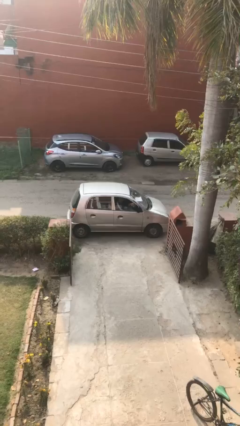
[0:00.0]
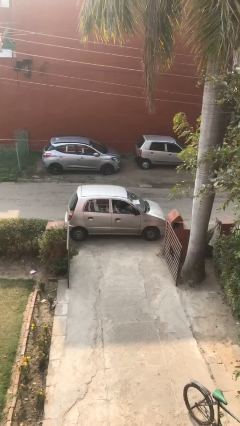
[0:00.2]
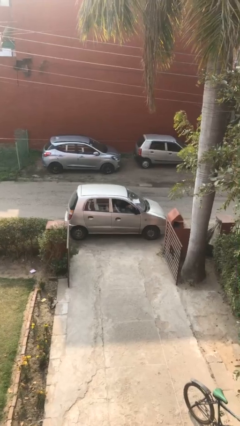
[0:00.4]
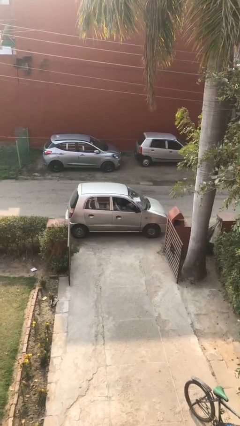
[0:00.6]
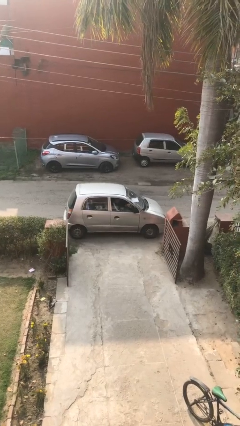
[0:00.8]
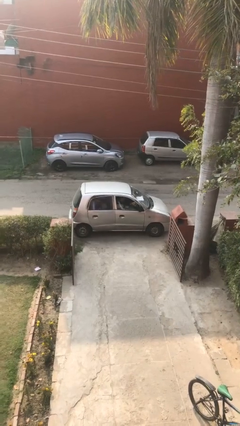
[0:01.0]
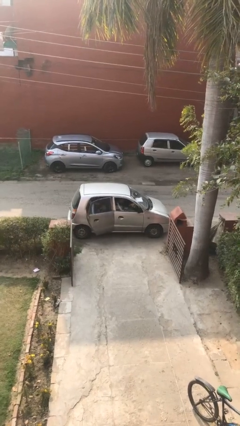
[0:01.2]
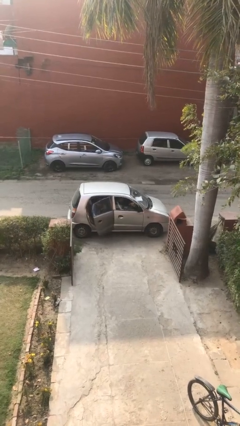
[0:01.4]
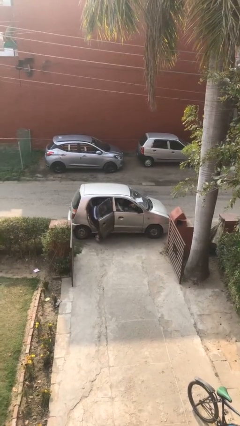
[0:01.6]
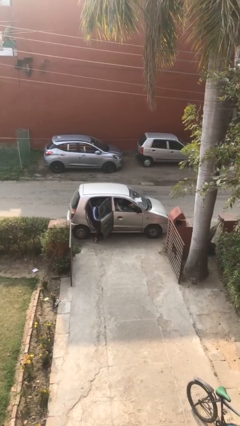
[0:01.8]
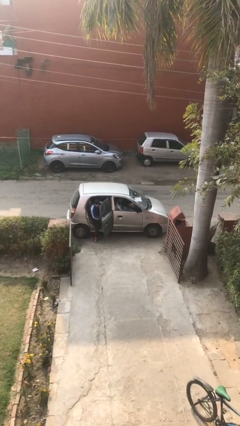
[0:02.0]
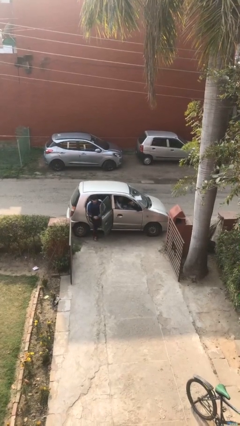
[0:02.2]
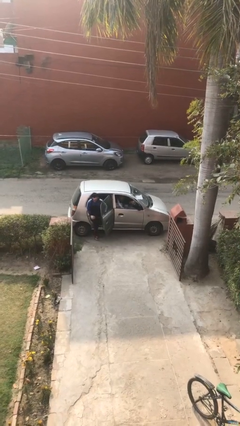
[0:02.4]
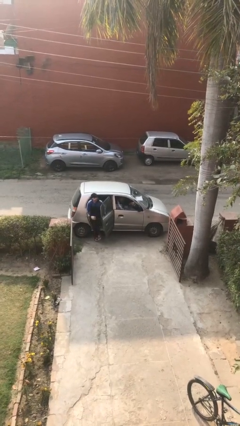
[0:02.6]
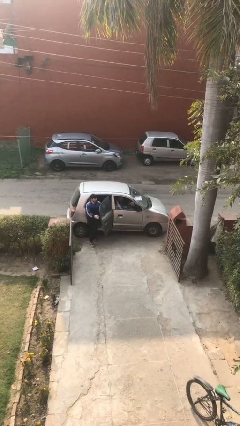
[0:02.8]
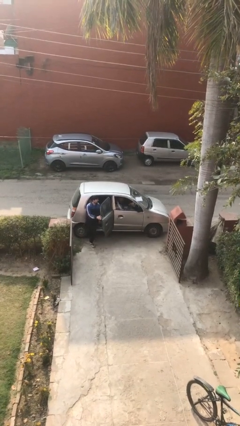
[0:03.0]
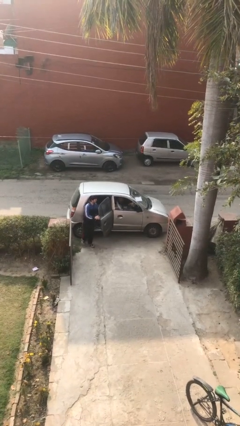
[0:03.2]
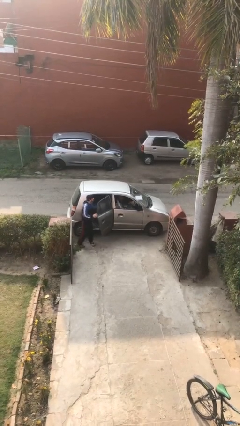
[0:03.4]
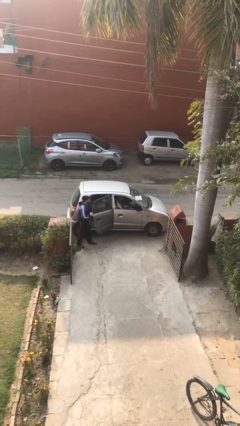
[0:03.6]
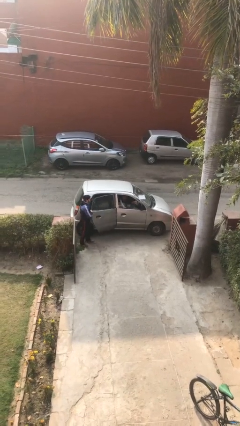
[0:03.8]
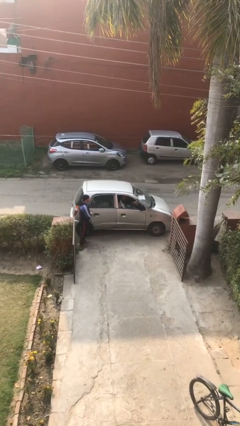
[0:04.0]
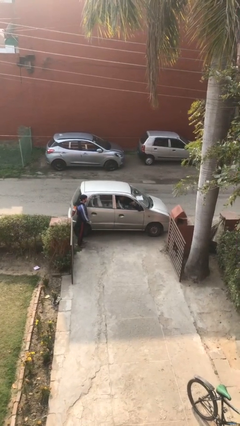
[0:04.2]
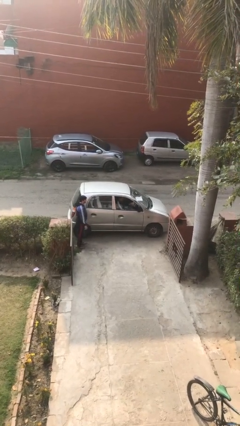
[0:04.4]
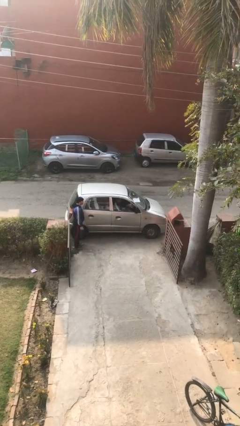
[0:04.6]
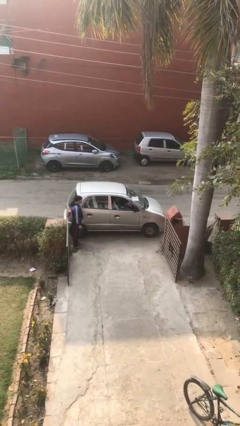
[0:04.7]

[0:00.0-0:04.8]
car drops off person

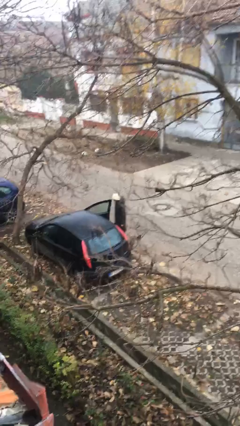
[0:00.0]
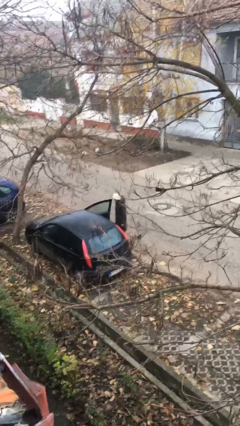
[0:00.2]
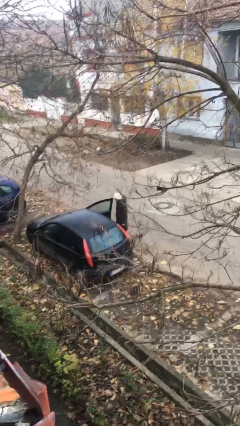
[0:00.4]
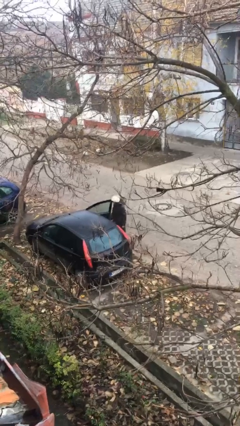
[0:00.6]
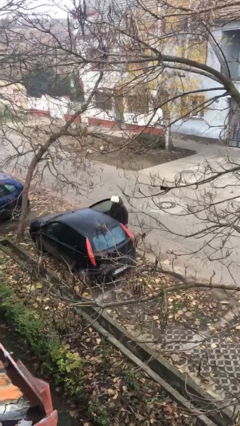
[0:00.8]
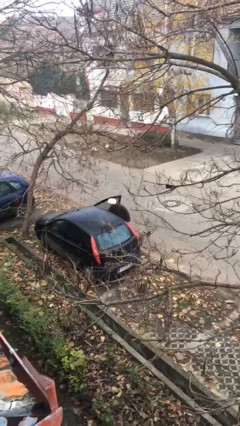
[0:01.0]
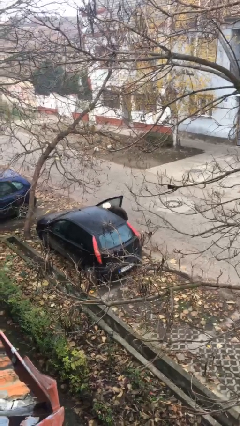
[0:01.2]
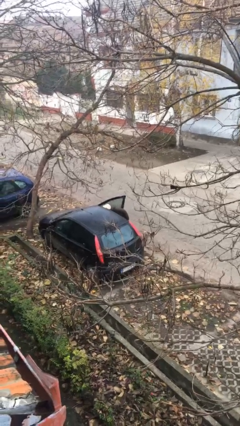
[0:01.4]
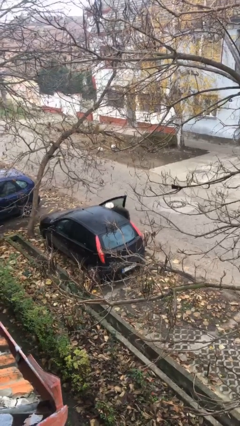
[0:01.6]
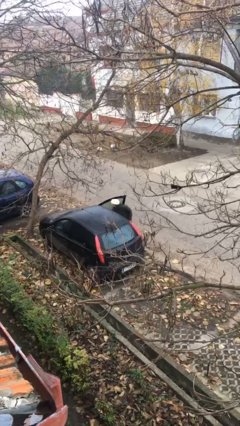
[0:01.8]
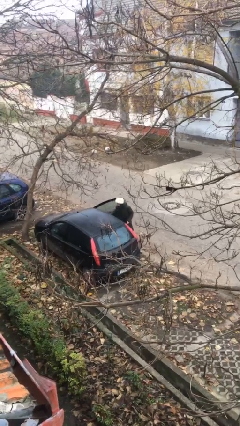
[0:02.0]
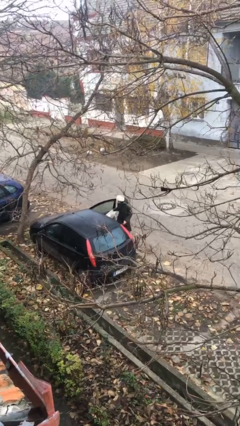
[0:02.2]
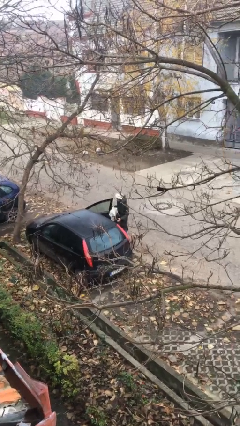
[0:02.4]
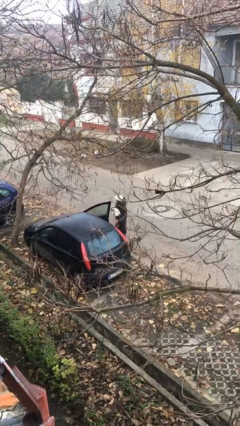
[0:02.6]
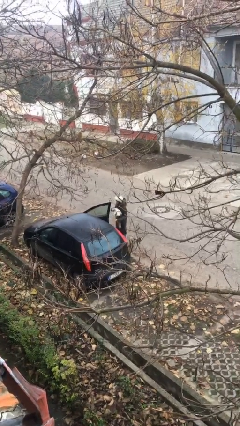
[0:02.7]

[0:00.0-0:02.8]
person unloads car

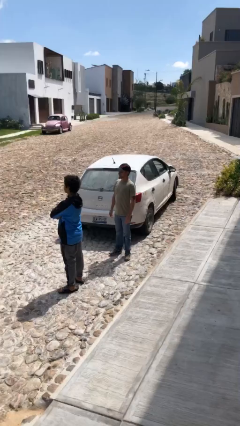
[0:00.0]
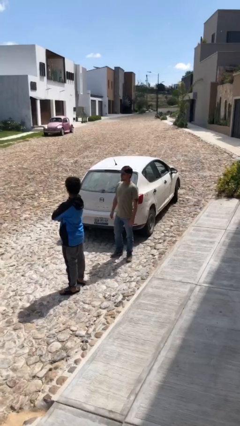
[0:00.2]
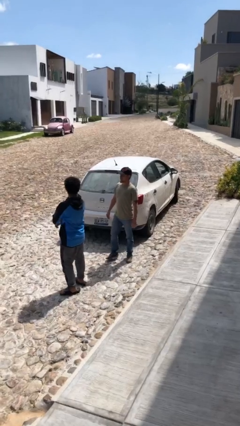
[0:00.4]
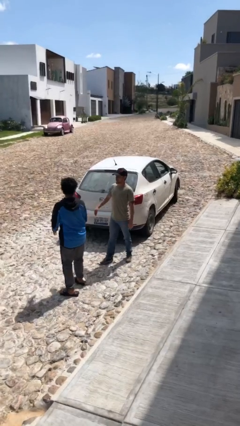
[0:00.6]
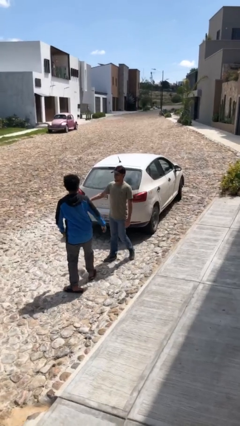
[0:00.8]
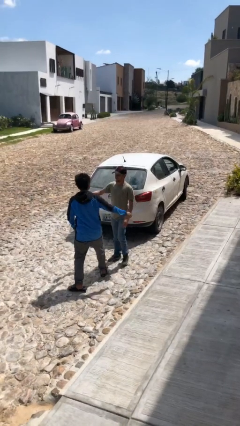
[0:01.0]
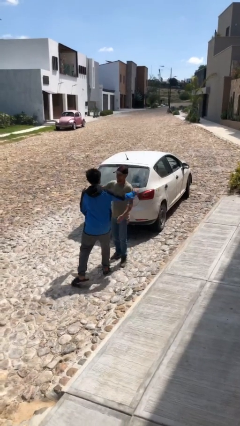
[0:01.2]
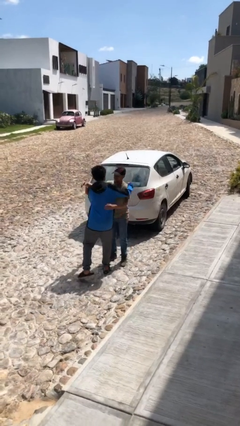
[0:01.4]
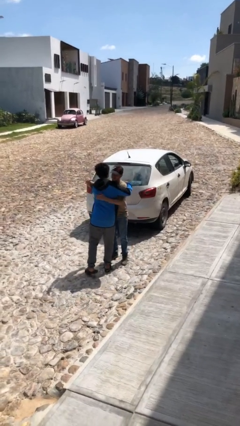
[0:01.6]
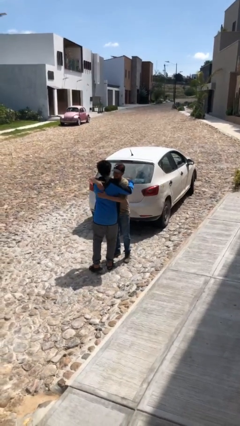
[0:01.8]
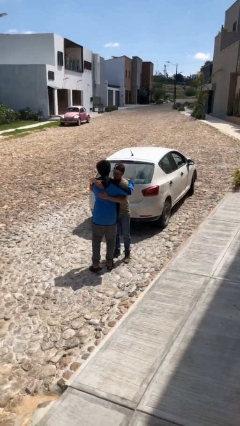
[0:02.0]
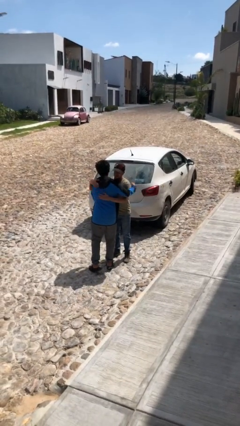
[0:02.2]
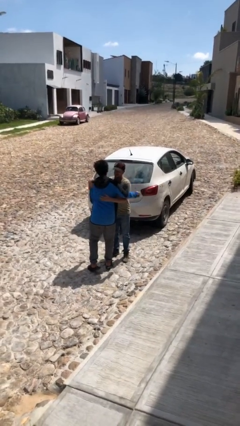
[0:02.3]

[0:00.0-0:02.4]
person embraces person

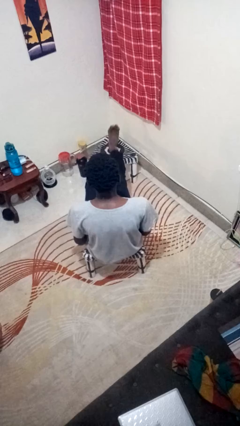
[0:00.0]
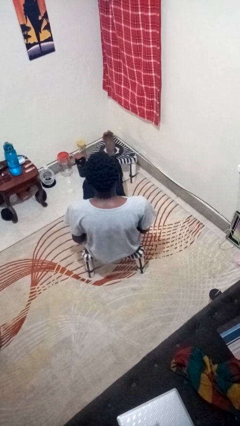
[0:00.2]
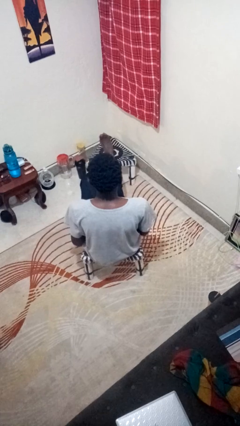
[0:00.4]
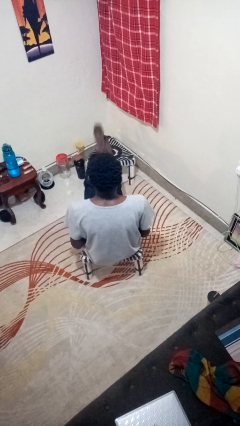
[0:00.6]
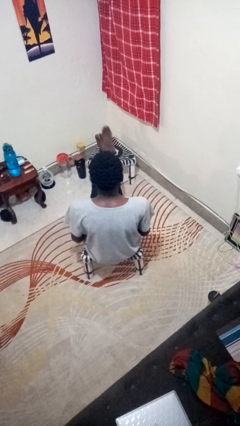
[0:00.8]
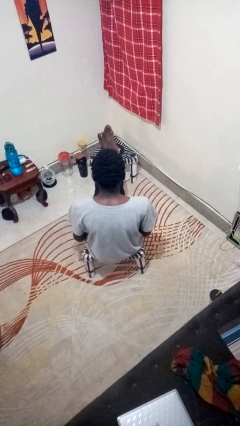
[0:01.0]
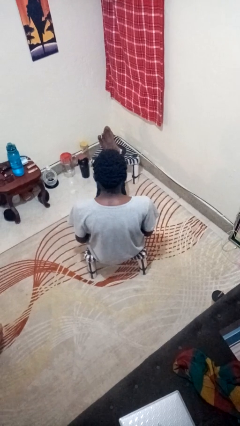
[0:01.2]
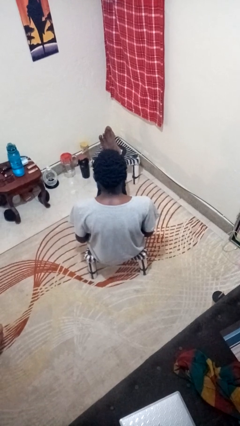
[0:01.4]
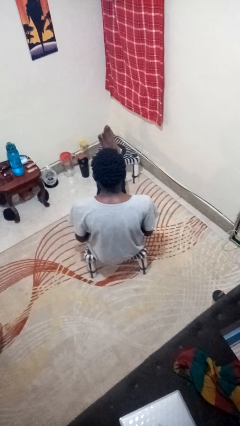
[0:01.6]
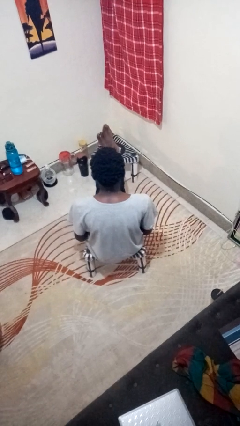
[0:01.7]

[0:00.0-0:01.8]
person puts feet up

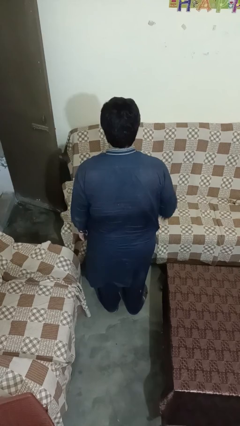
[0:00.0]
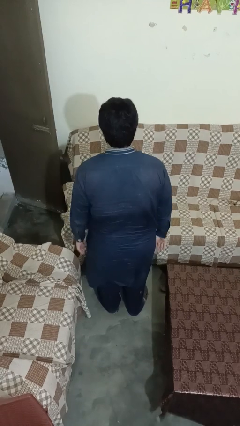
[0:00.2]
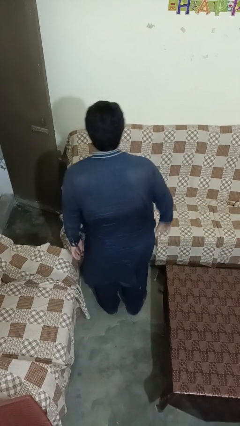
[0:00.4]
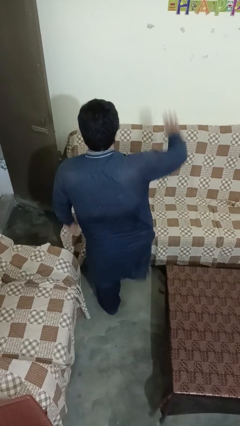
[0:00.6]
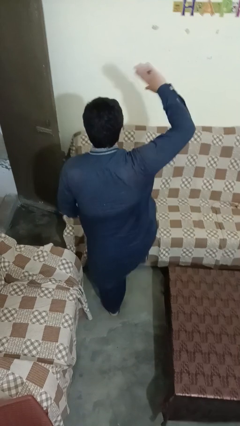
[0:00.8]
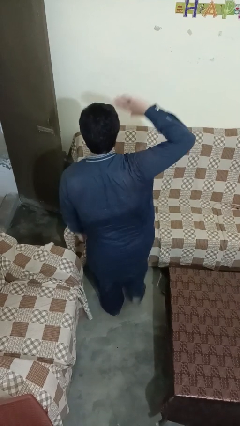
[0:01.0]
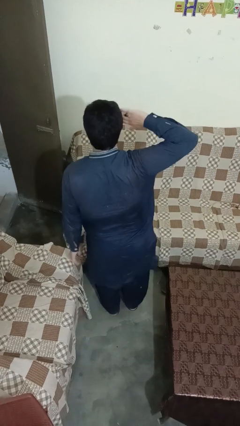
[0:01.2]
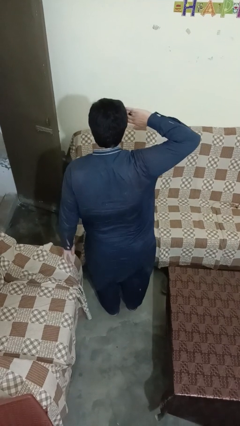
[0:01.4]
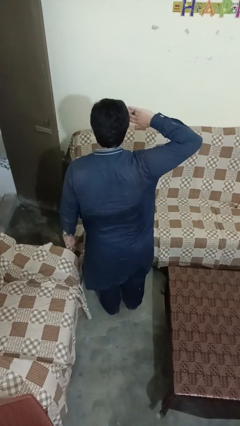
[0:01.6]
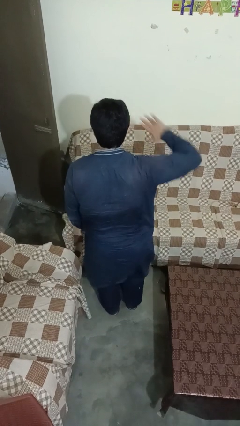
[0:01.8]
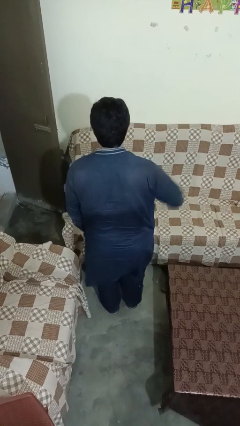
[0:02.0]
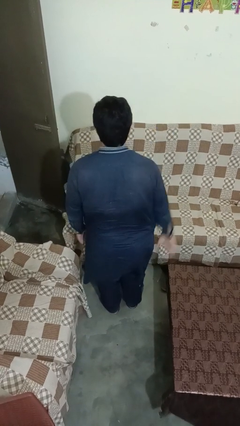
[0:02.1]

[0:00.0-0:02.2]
person salutes

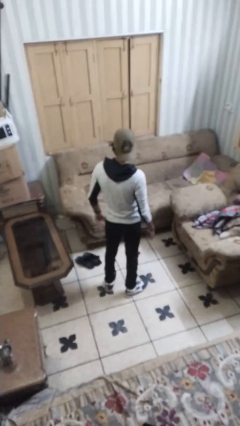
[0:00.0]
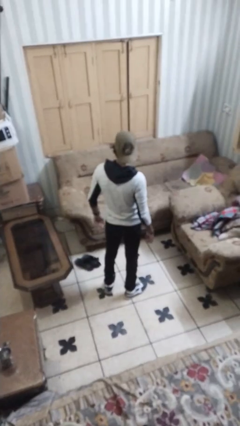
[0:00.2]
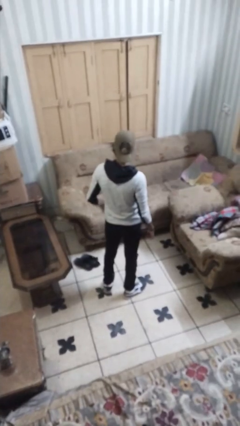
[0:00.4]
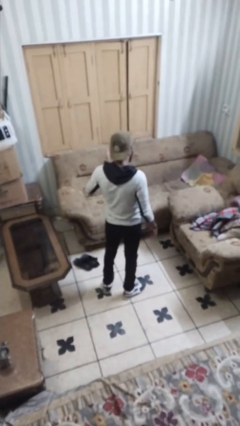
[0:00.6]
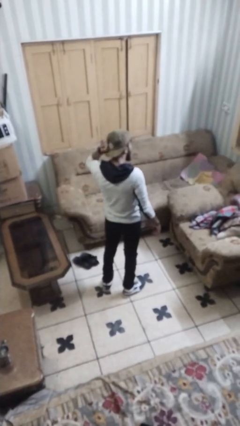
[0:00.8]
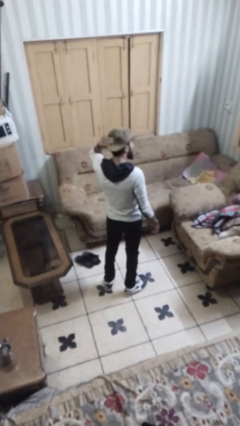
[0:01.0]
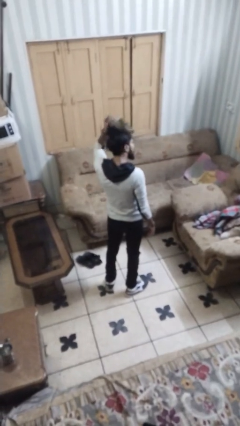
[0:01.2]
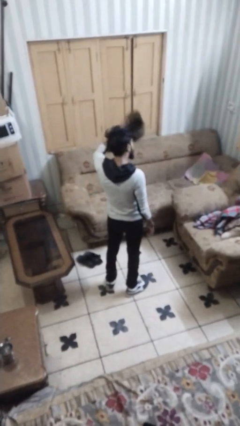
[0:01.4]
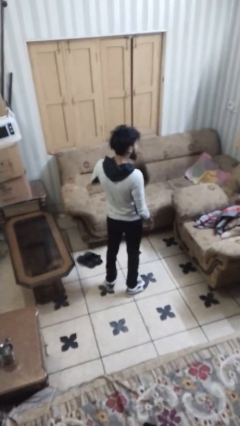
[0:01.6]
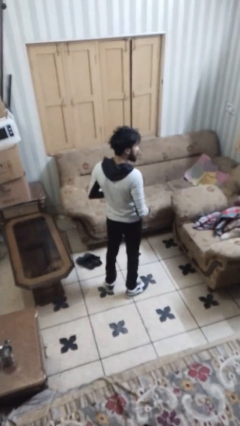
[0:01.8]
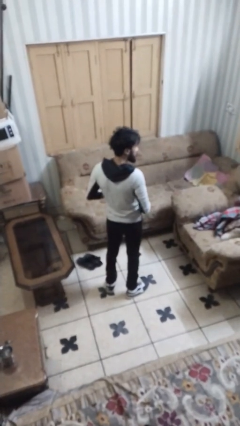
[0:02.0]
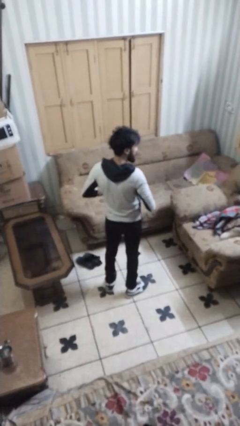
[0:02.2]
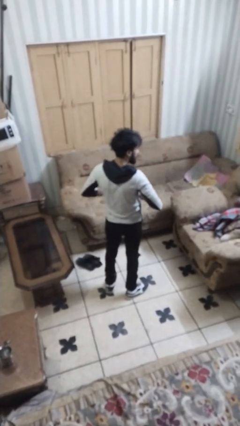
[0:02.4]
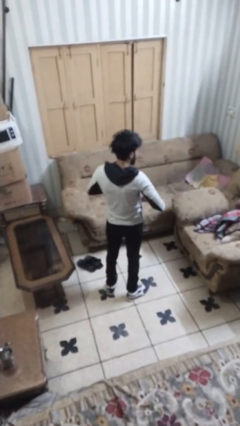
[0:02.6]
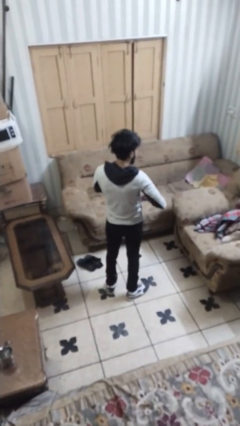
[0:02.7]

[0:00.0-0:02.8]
person takes off hat

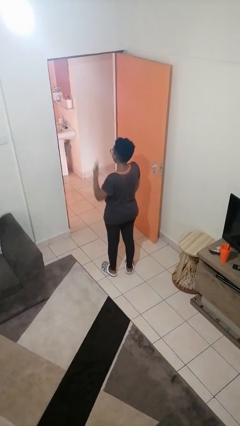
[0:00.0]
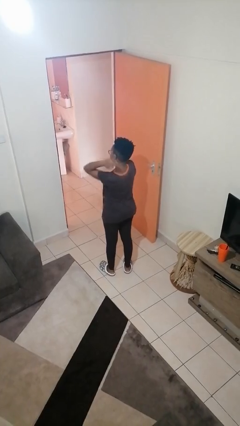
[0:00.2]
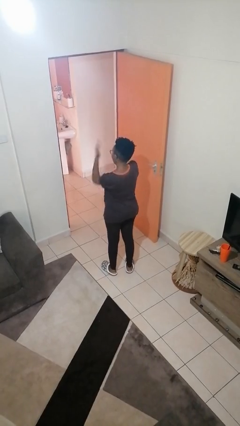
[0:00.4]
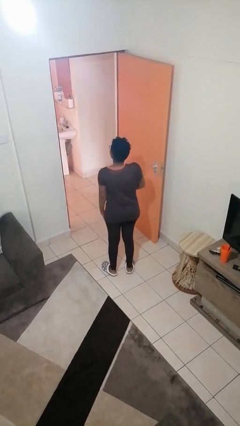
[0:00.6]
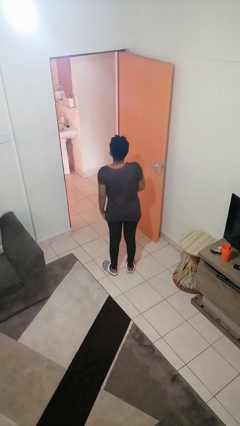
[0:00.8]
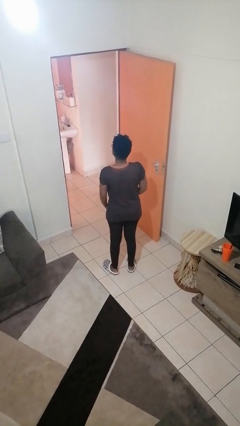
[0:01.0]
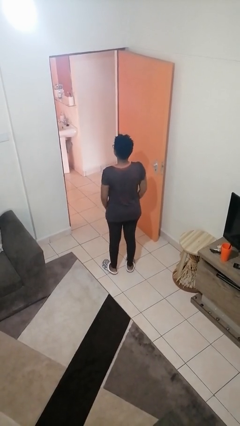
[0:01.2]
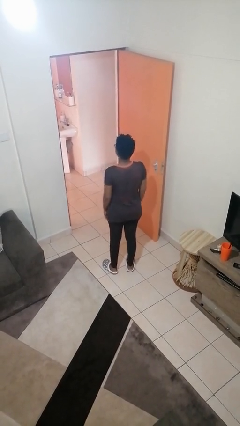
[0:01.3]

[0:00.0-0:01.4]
person karate chop
